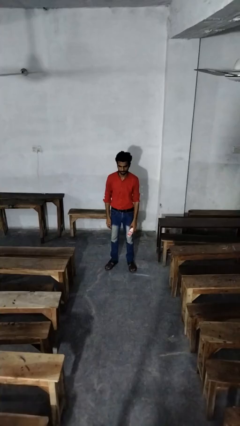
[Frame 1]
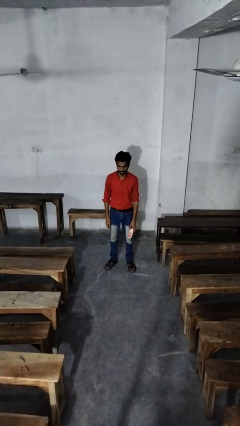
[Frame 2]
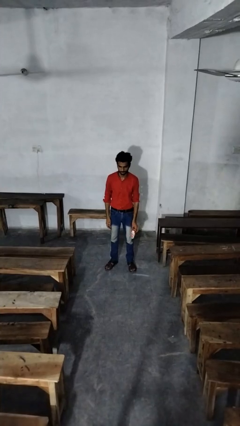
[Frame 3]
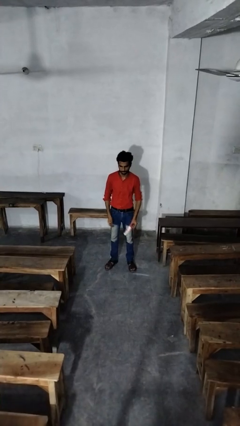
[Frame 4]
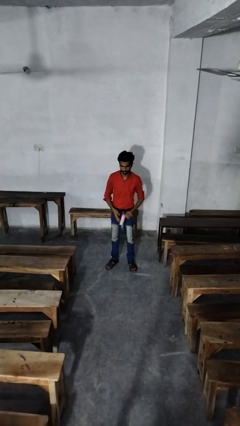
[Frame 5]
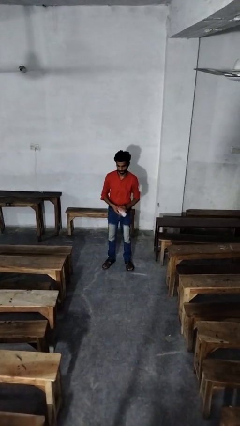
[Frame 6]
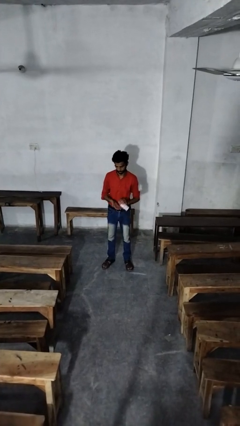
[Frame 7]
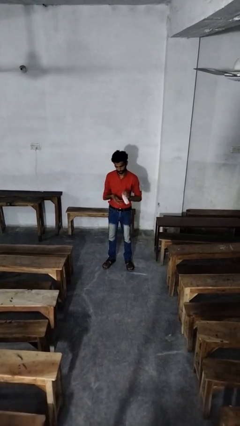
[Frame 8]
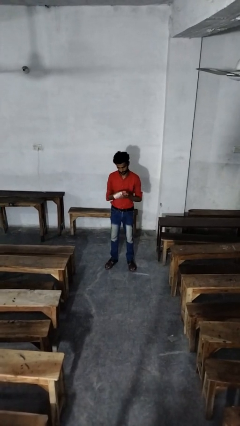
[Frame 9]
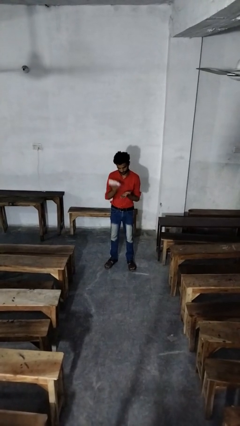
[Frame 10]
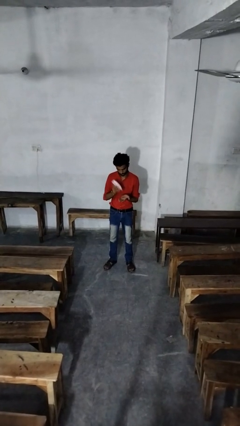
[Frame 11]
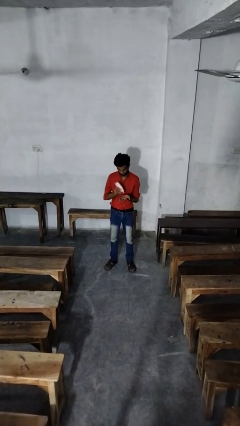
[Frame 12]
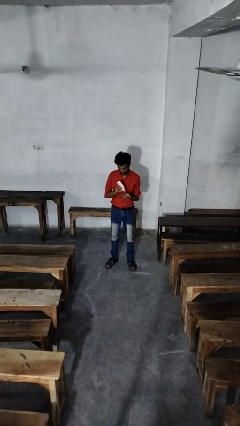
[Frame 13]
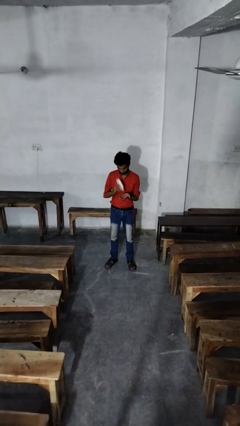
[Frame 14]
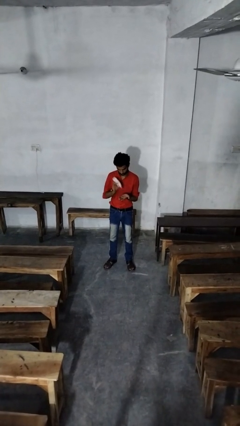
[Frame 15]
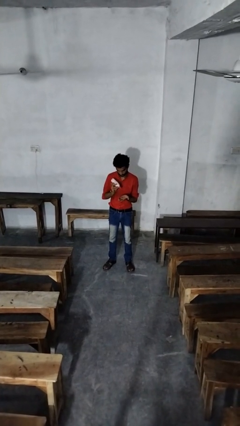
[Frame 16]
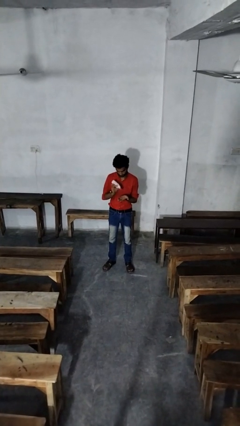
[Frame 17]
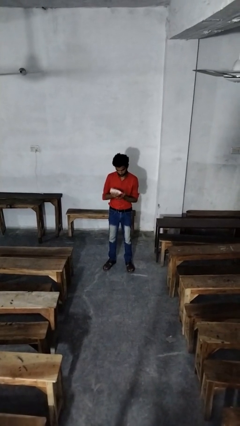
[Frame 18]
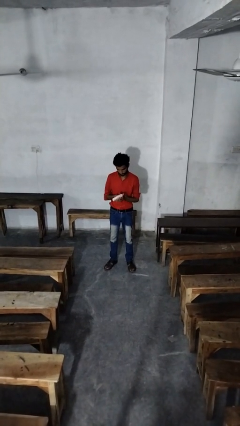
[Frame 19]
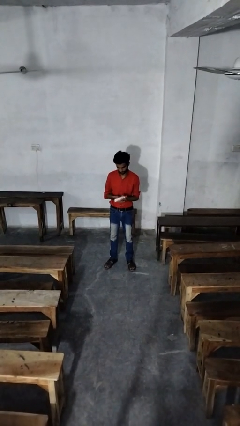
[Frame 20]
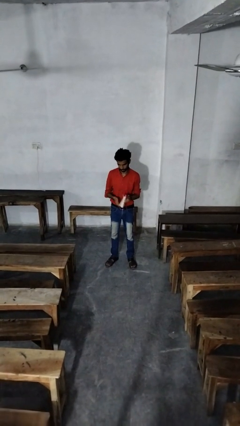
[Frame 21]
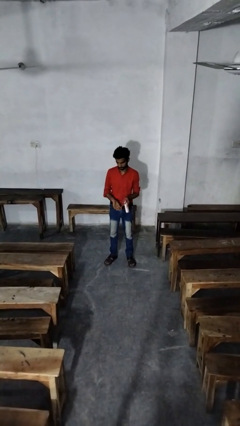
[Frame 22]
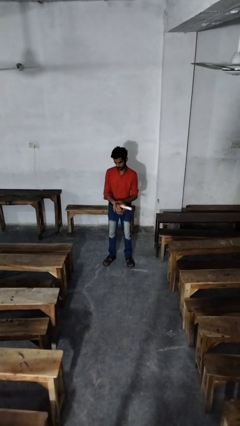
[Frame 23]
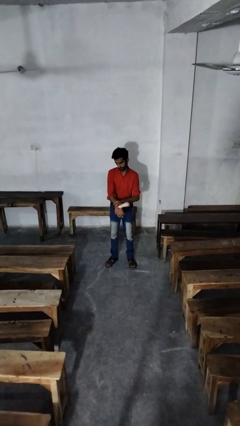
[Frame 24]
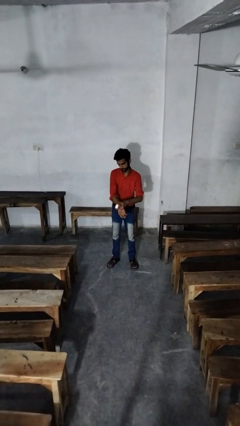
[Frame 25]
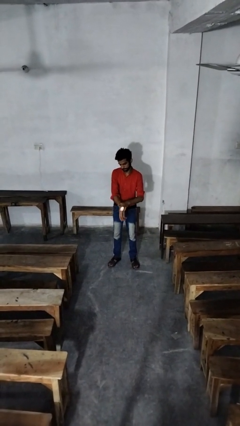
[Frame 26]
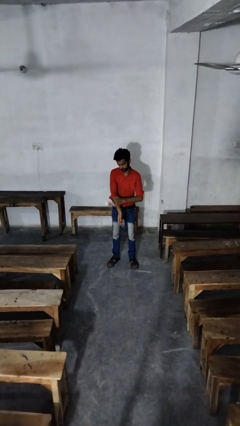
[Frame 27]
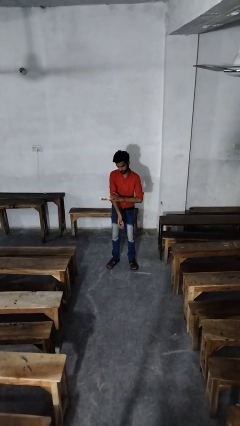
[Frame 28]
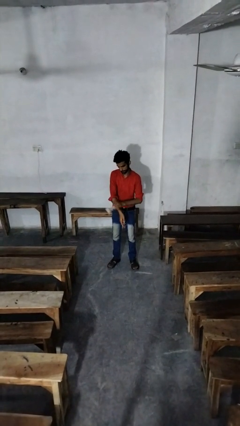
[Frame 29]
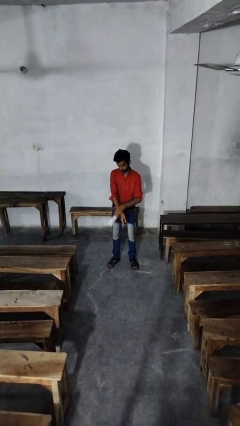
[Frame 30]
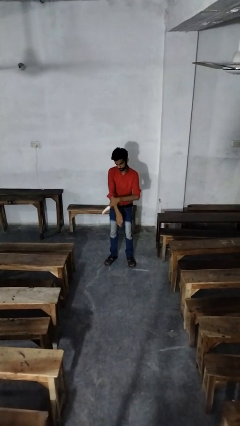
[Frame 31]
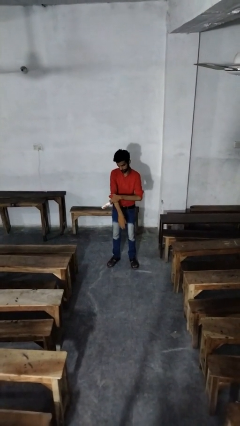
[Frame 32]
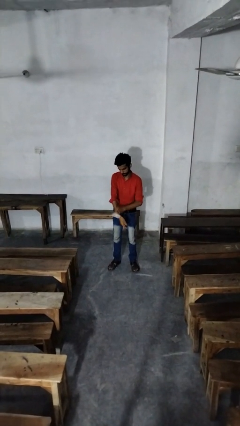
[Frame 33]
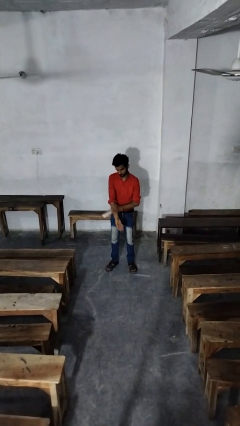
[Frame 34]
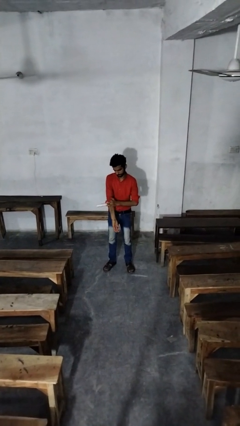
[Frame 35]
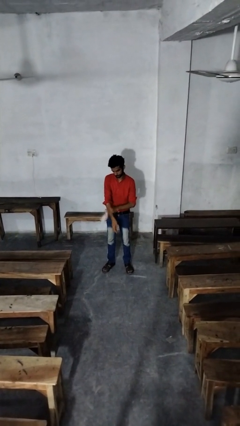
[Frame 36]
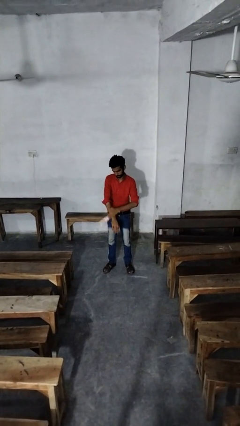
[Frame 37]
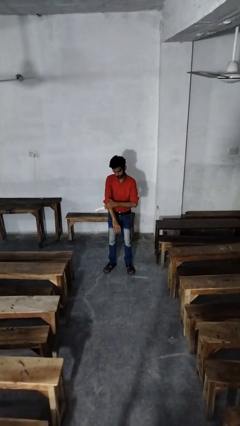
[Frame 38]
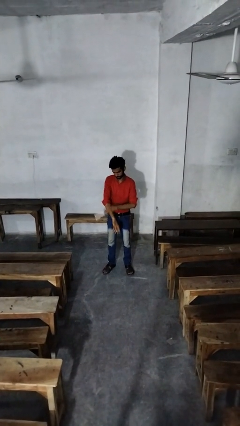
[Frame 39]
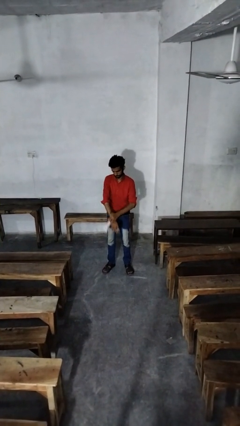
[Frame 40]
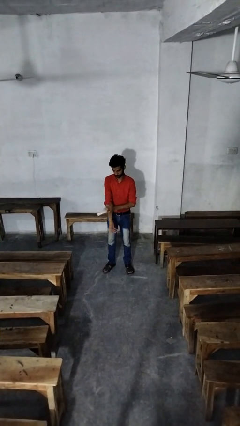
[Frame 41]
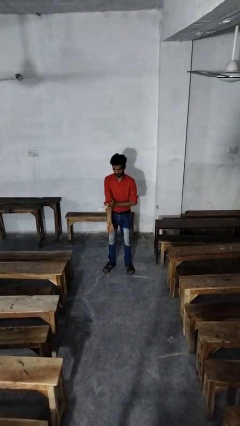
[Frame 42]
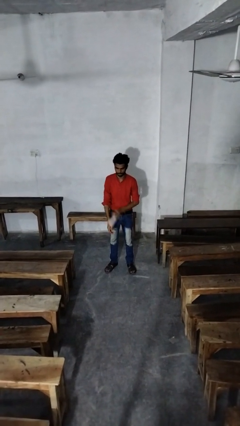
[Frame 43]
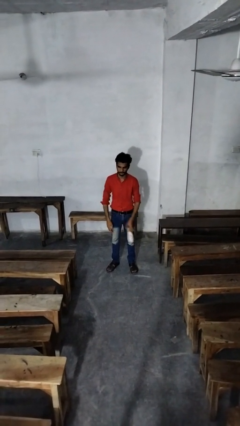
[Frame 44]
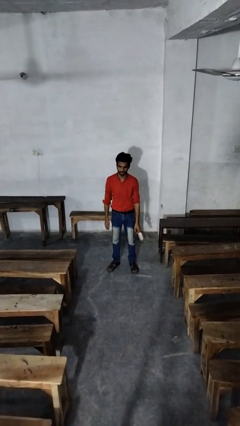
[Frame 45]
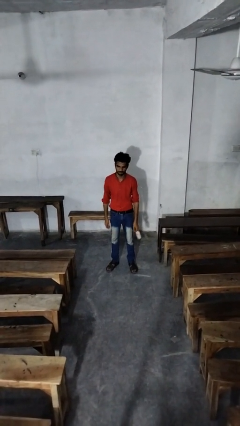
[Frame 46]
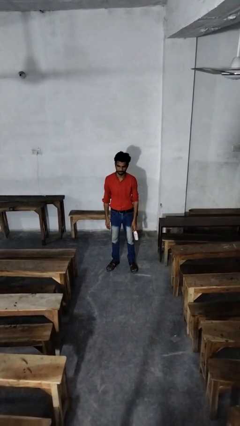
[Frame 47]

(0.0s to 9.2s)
person applies sunscreen

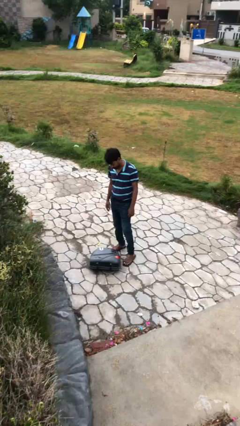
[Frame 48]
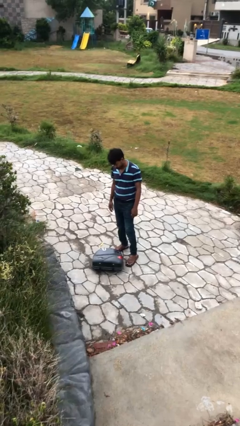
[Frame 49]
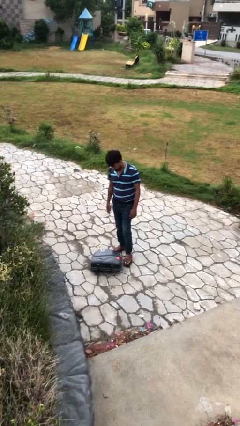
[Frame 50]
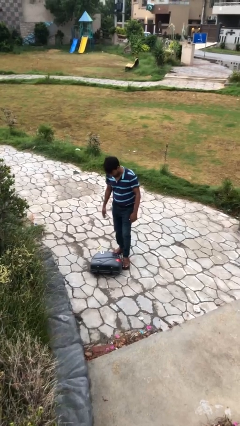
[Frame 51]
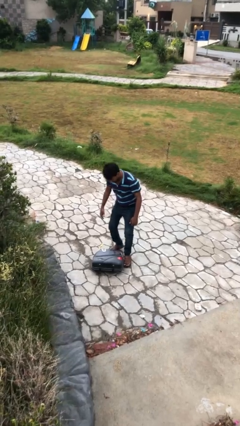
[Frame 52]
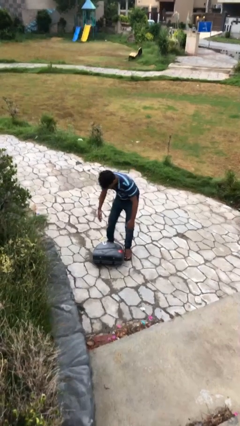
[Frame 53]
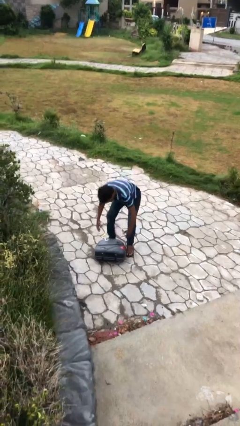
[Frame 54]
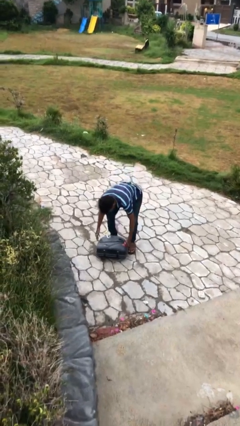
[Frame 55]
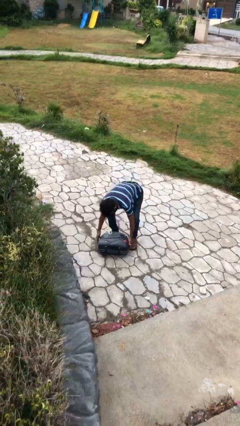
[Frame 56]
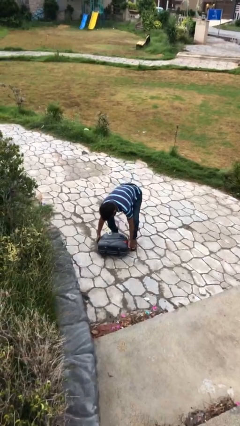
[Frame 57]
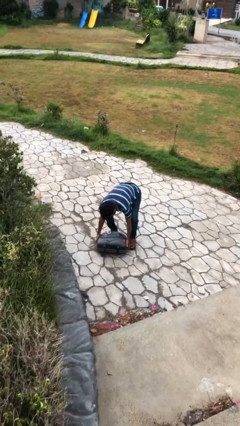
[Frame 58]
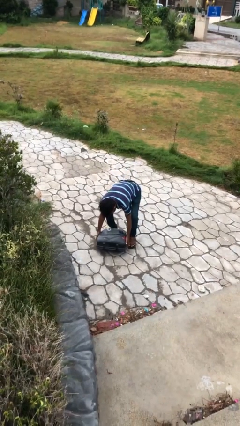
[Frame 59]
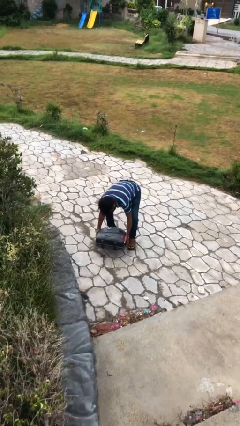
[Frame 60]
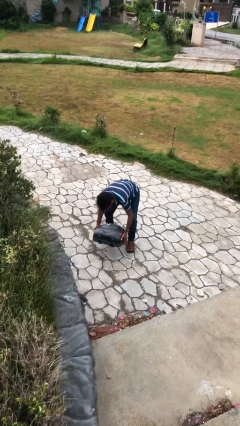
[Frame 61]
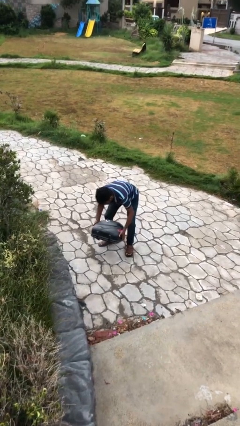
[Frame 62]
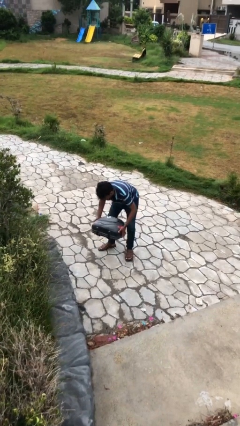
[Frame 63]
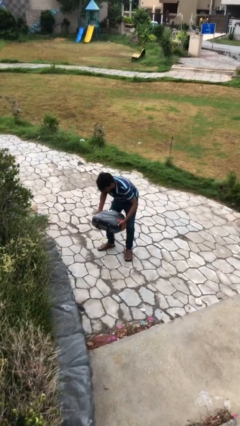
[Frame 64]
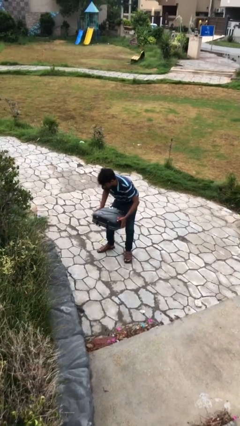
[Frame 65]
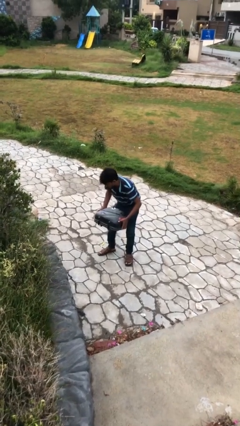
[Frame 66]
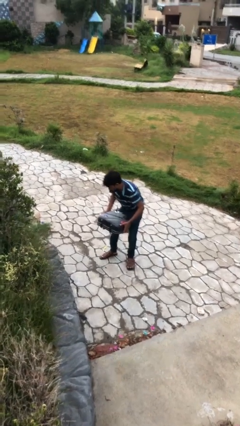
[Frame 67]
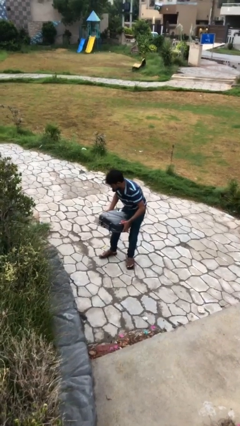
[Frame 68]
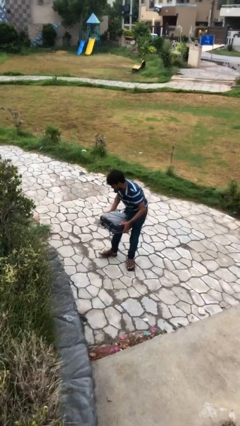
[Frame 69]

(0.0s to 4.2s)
person picks up object from floor

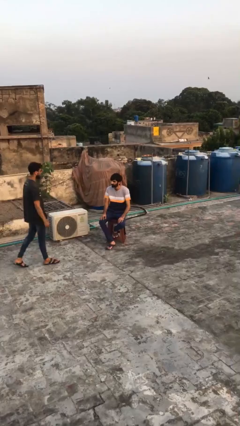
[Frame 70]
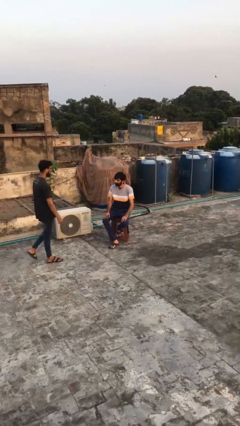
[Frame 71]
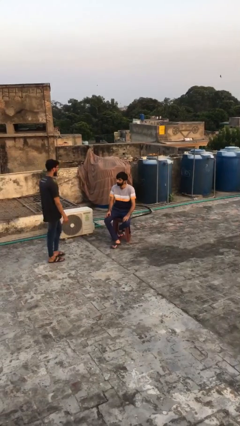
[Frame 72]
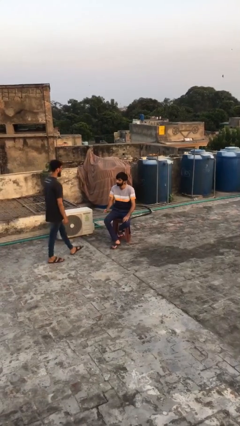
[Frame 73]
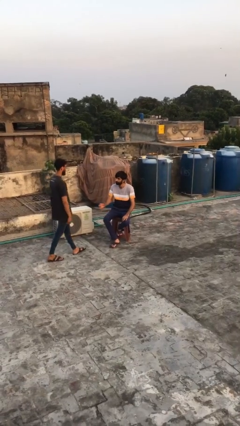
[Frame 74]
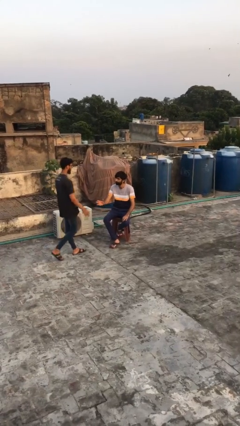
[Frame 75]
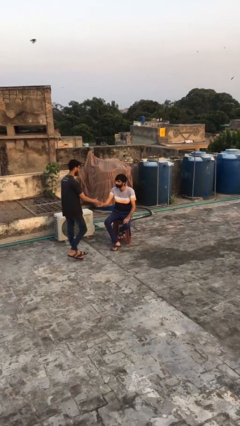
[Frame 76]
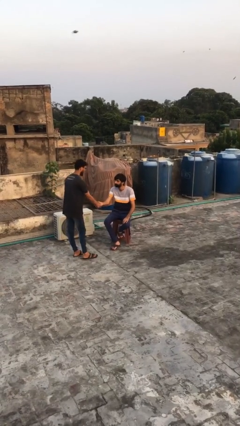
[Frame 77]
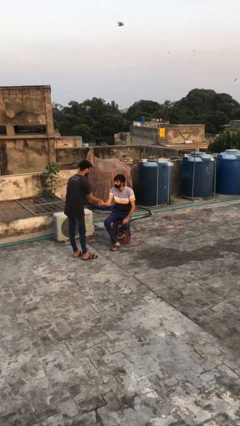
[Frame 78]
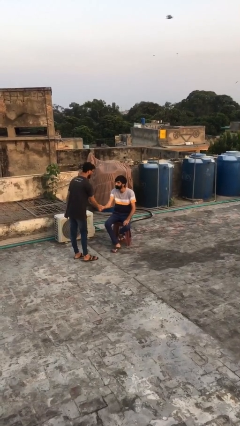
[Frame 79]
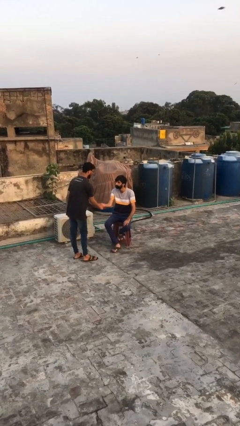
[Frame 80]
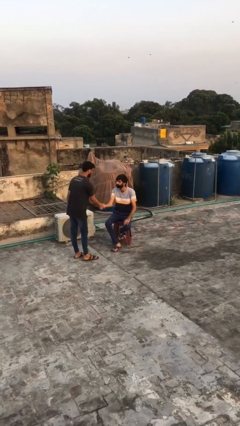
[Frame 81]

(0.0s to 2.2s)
person shakes hand

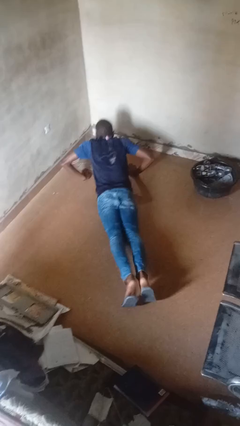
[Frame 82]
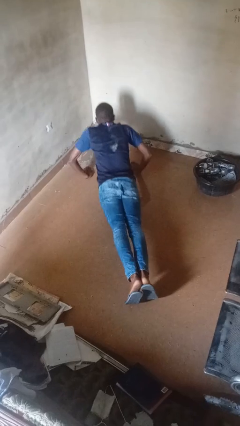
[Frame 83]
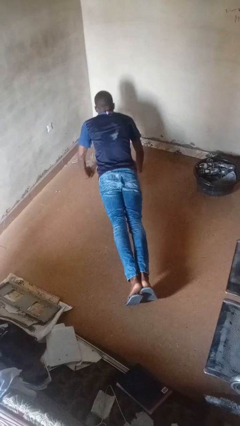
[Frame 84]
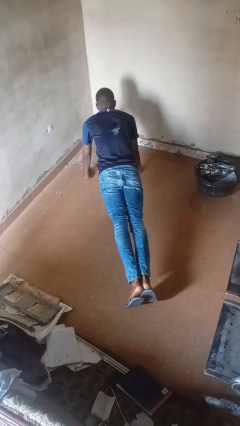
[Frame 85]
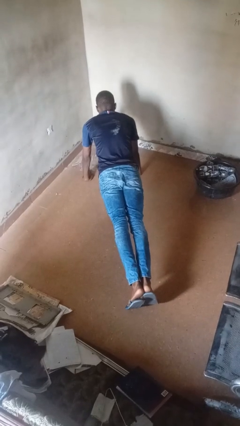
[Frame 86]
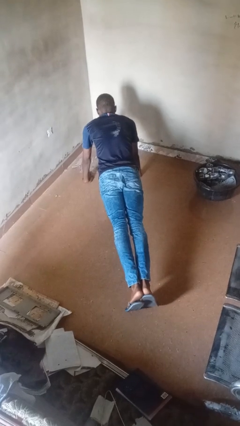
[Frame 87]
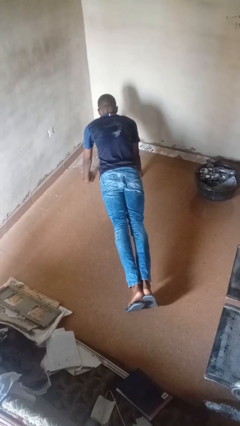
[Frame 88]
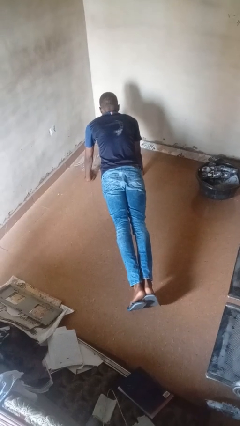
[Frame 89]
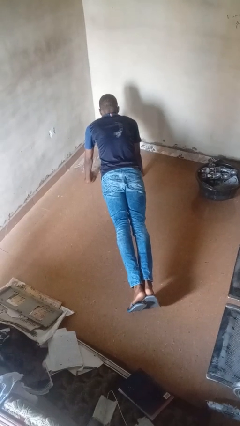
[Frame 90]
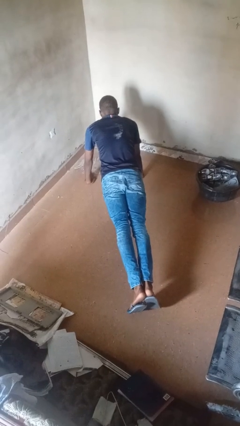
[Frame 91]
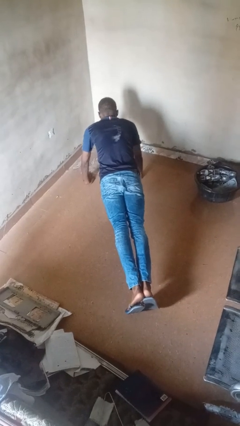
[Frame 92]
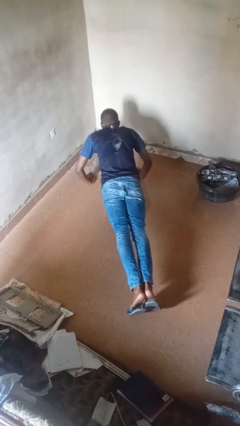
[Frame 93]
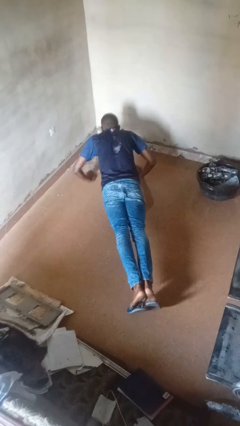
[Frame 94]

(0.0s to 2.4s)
person exercises with pushup
